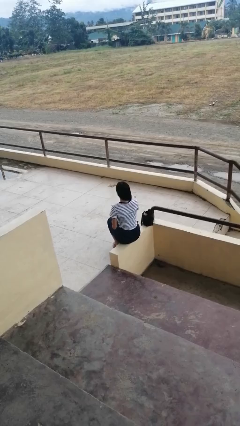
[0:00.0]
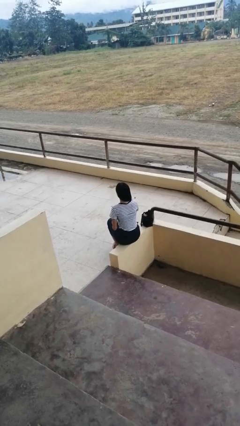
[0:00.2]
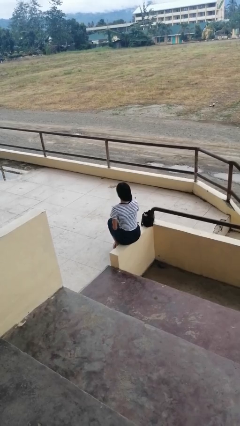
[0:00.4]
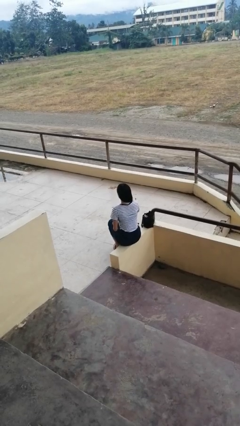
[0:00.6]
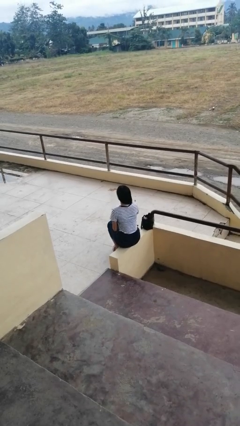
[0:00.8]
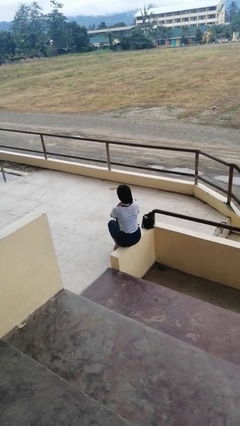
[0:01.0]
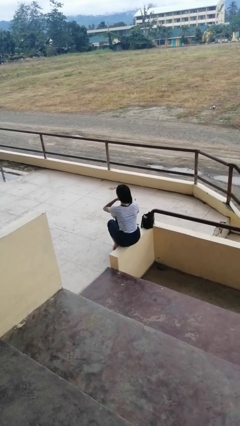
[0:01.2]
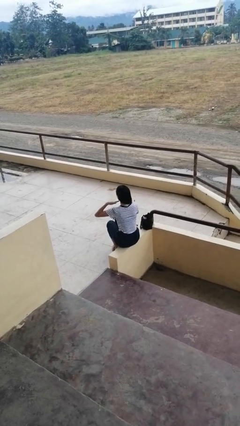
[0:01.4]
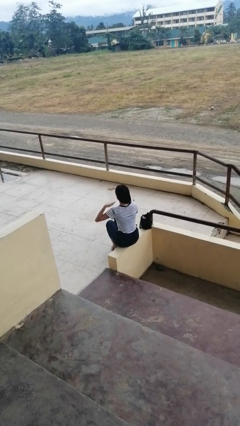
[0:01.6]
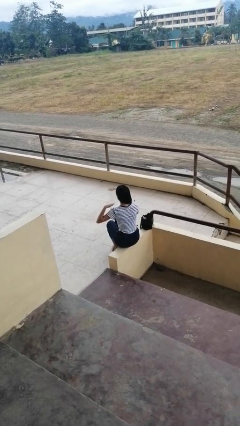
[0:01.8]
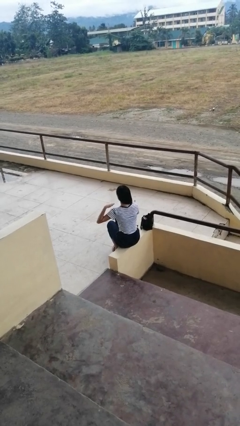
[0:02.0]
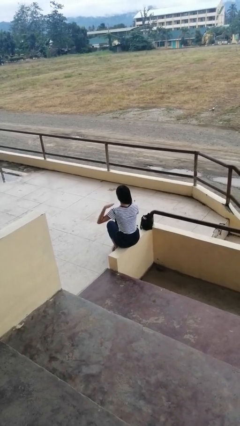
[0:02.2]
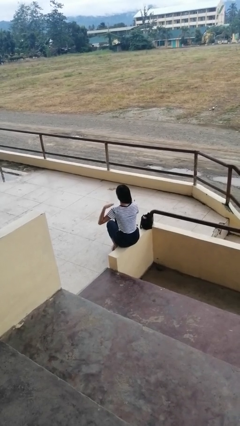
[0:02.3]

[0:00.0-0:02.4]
person gestures cut

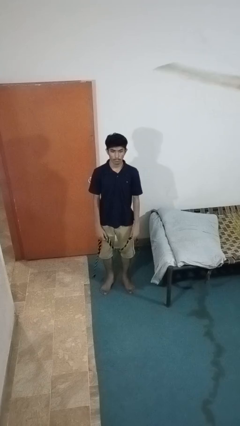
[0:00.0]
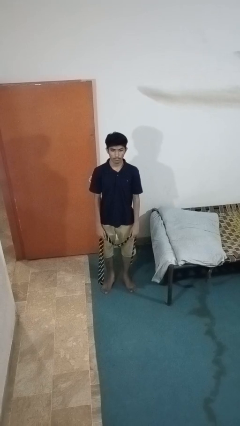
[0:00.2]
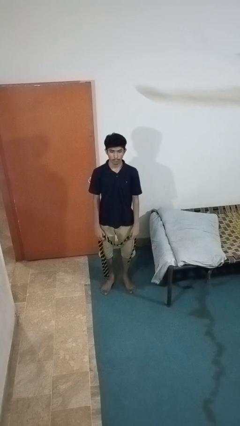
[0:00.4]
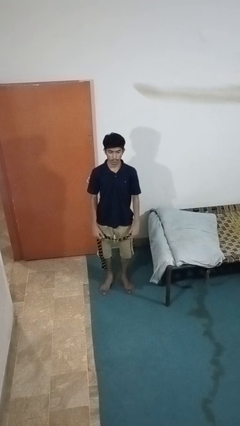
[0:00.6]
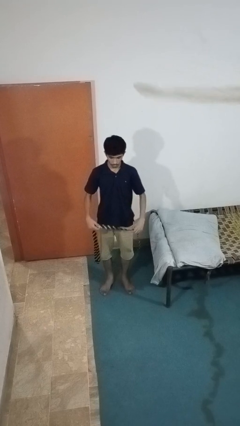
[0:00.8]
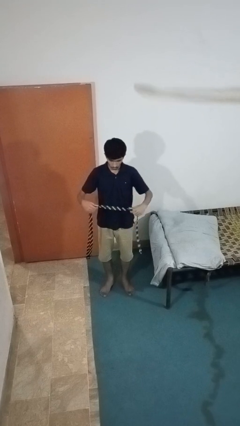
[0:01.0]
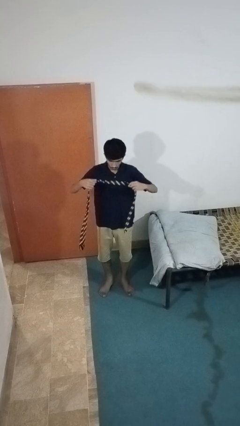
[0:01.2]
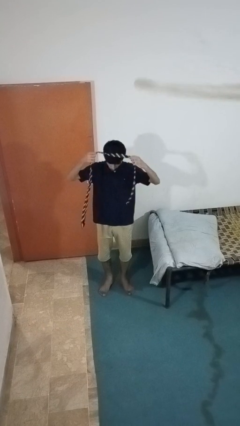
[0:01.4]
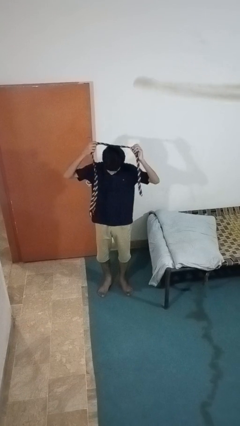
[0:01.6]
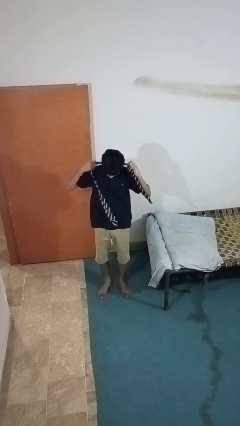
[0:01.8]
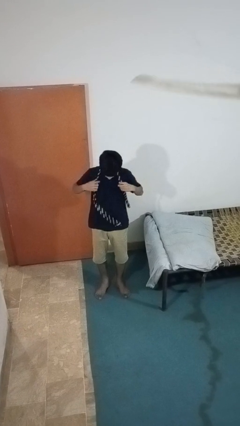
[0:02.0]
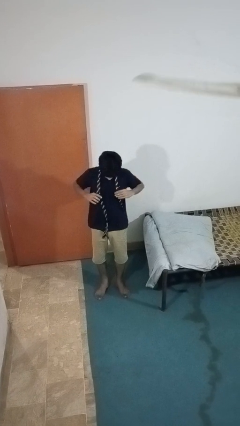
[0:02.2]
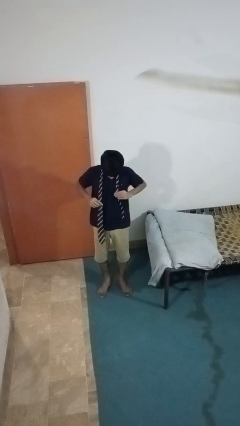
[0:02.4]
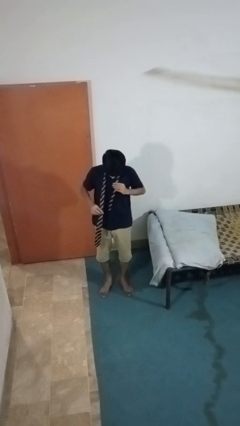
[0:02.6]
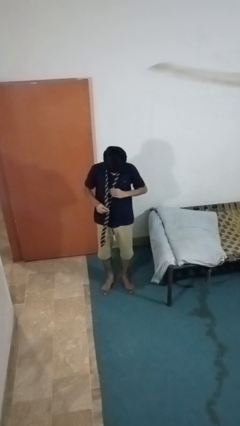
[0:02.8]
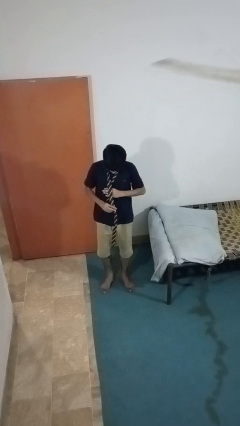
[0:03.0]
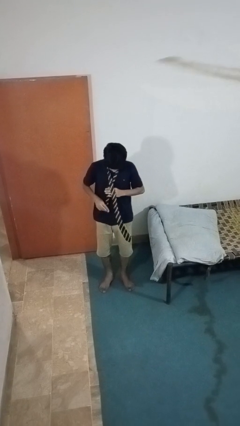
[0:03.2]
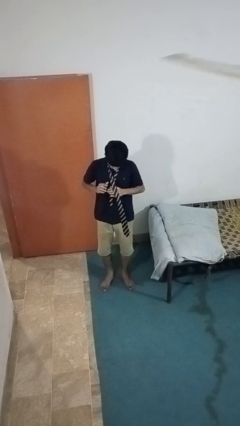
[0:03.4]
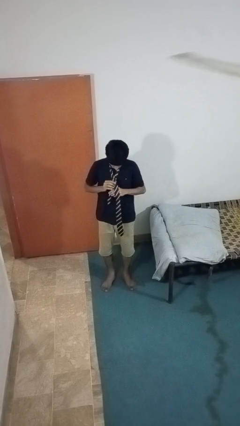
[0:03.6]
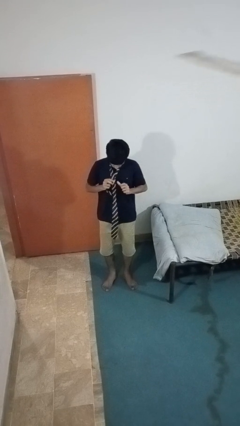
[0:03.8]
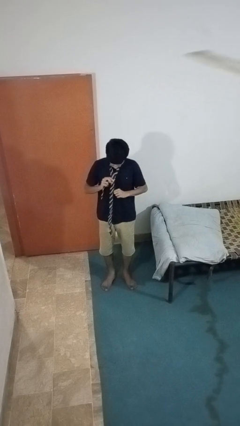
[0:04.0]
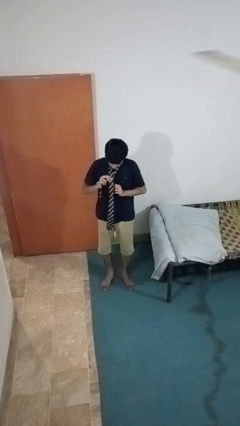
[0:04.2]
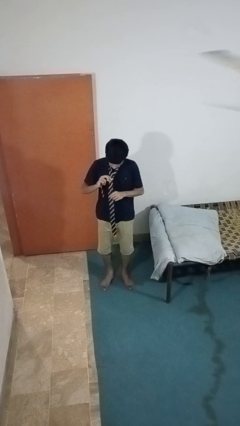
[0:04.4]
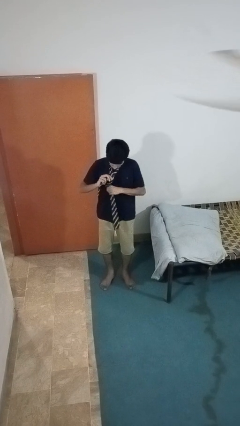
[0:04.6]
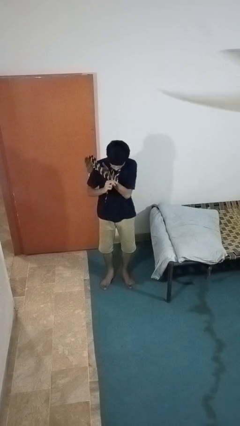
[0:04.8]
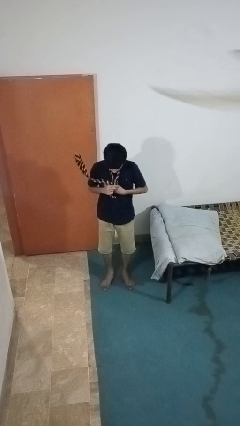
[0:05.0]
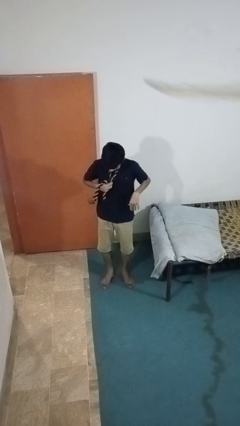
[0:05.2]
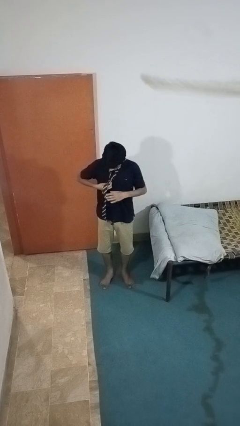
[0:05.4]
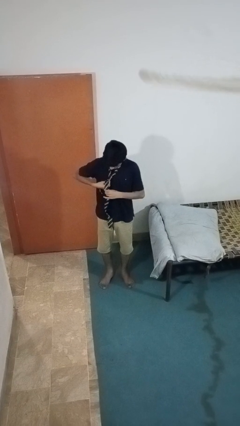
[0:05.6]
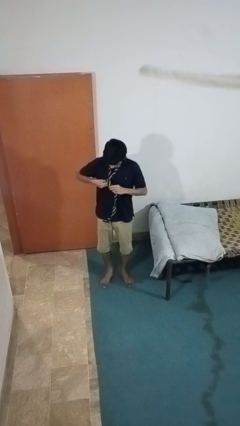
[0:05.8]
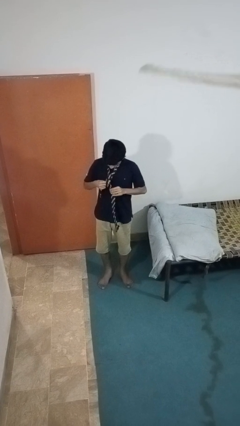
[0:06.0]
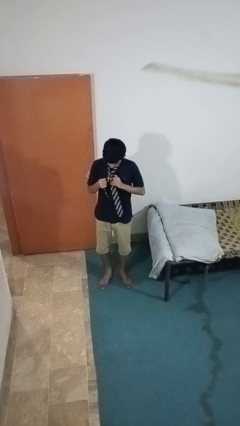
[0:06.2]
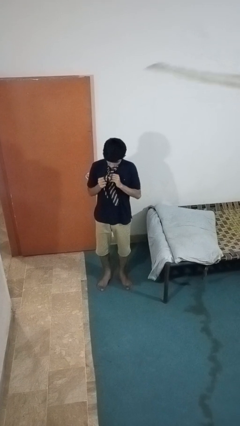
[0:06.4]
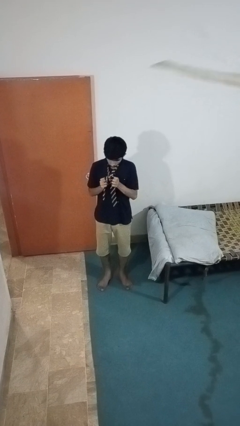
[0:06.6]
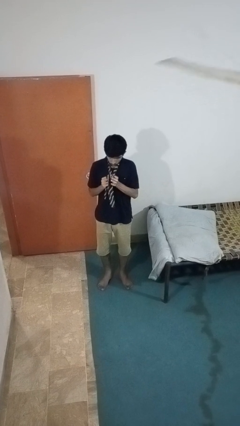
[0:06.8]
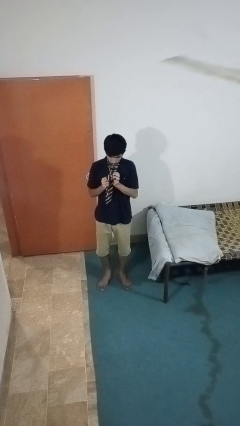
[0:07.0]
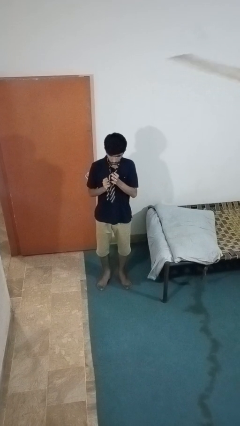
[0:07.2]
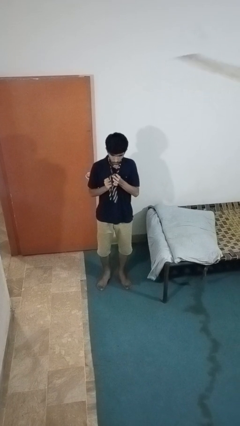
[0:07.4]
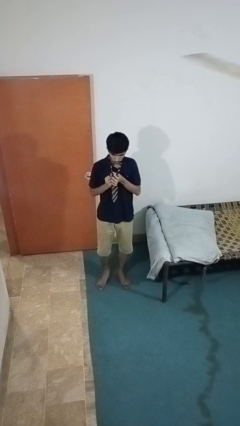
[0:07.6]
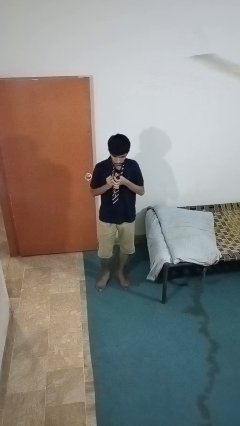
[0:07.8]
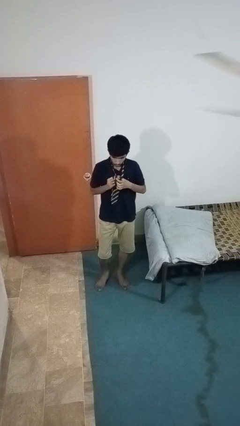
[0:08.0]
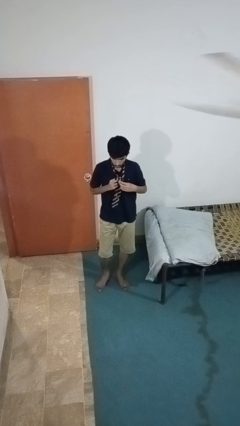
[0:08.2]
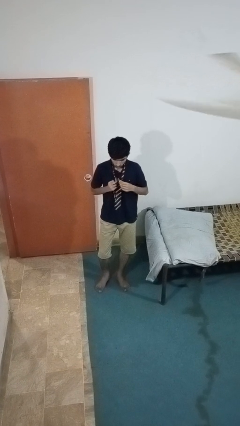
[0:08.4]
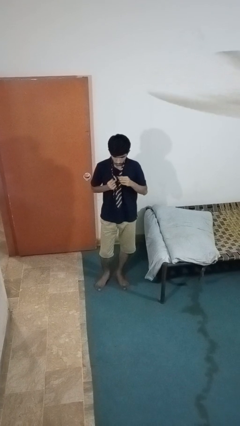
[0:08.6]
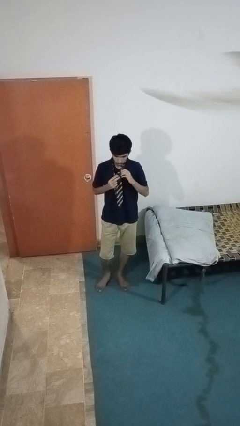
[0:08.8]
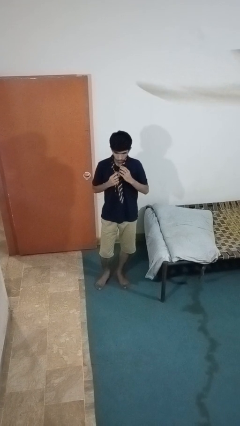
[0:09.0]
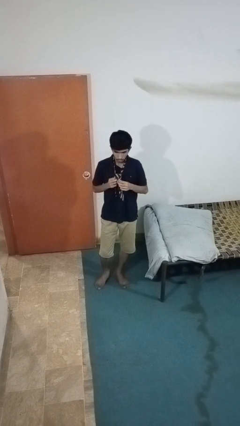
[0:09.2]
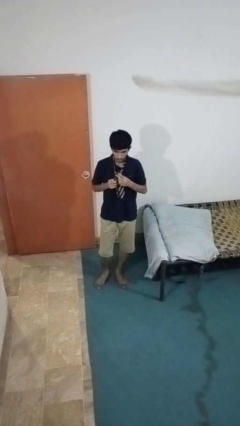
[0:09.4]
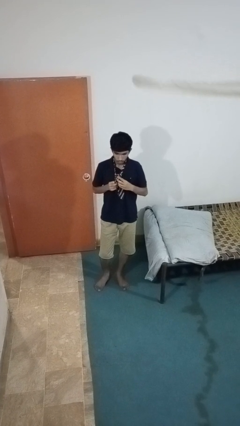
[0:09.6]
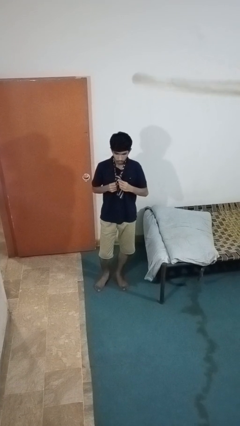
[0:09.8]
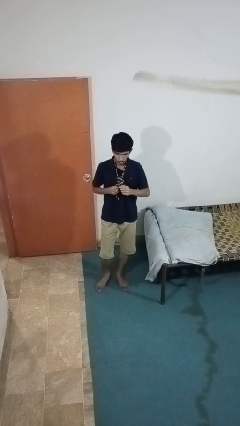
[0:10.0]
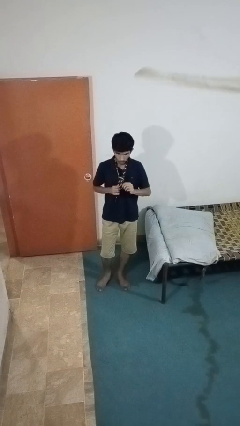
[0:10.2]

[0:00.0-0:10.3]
person puts on necktie

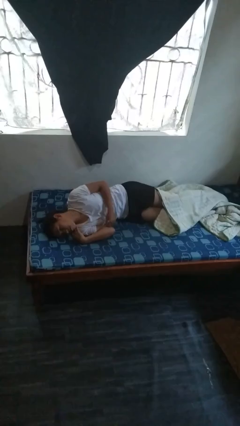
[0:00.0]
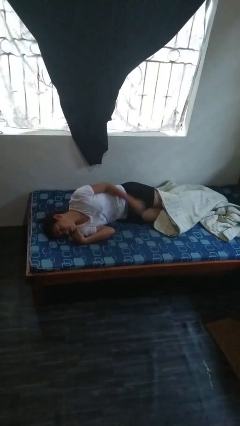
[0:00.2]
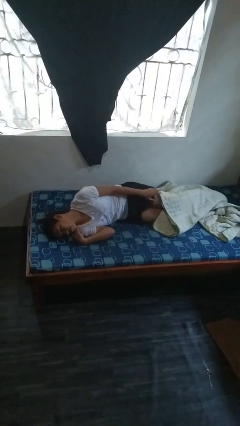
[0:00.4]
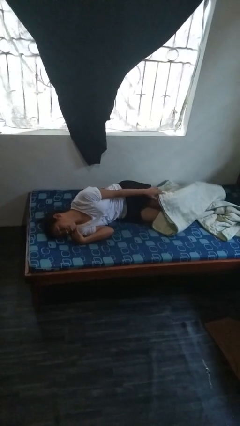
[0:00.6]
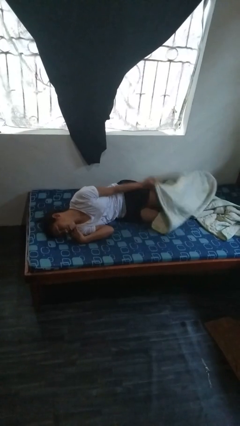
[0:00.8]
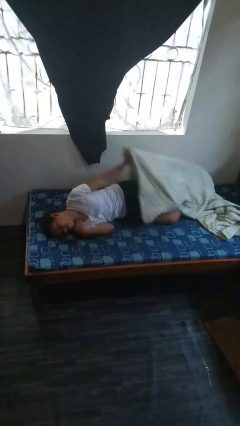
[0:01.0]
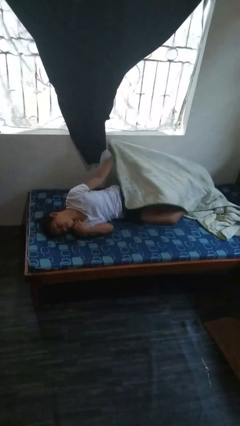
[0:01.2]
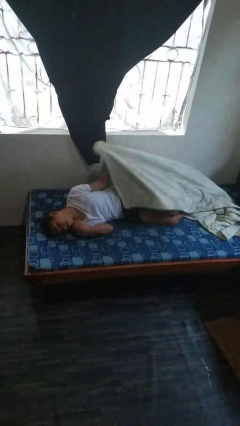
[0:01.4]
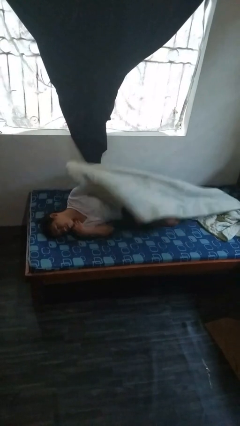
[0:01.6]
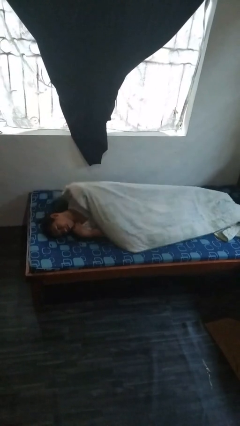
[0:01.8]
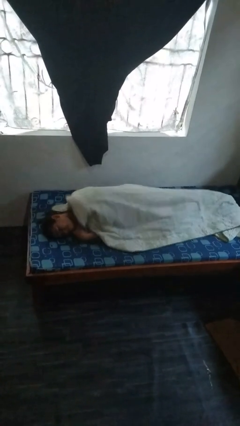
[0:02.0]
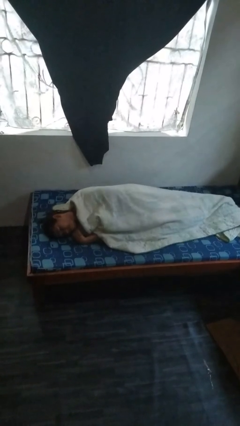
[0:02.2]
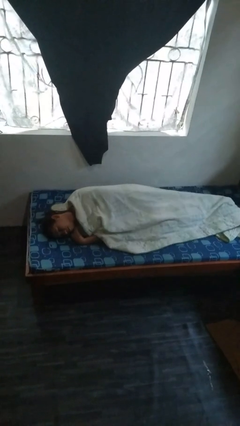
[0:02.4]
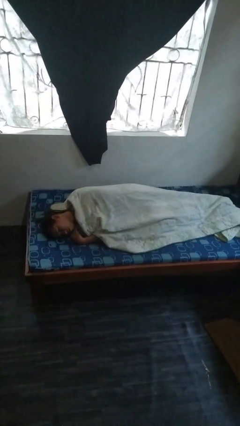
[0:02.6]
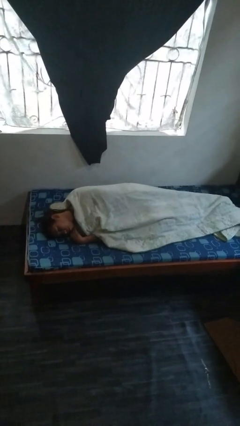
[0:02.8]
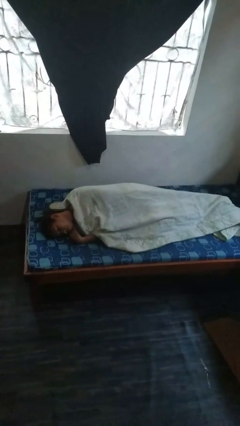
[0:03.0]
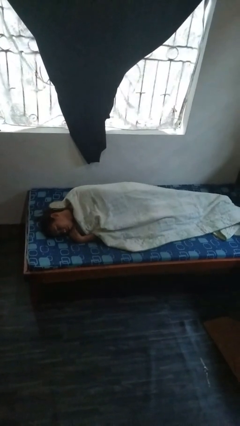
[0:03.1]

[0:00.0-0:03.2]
person covers with bedsheets

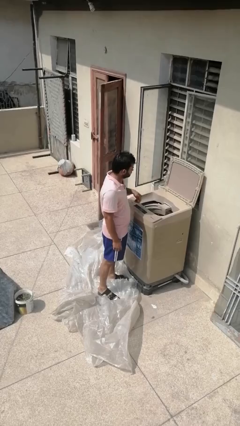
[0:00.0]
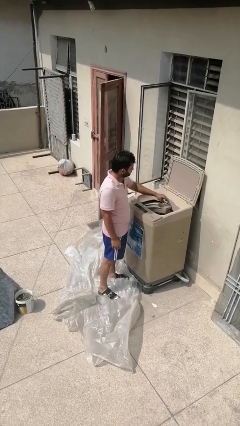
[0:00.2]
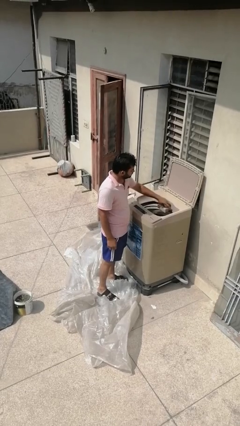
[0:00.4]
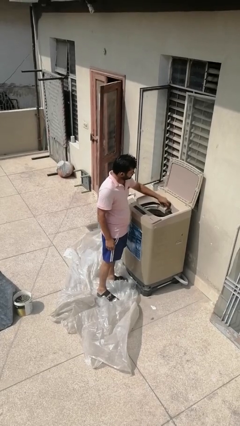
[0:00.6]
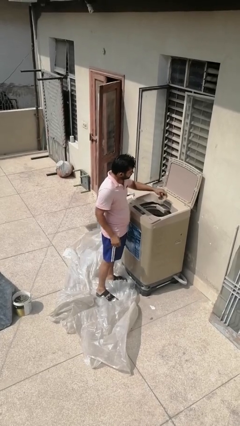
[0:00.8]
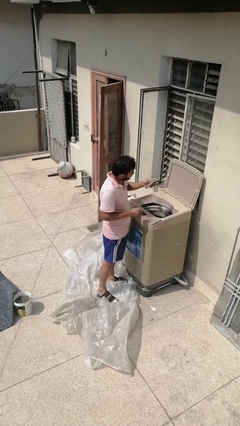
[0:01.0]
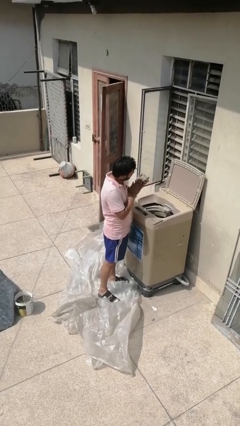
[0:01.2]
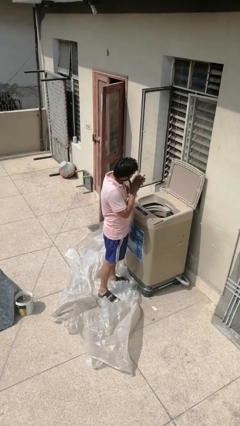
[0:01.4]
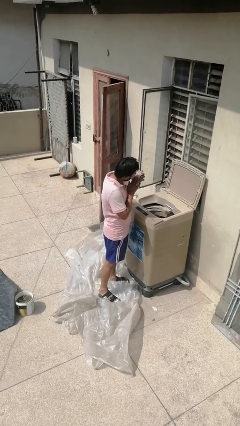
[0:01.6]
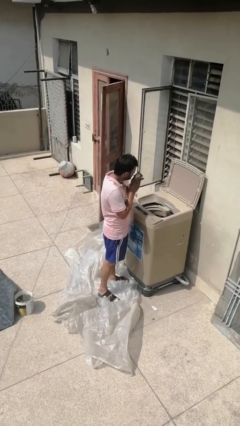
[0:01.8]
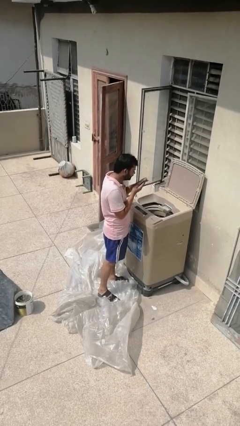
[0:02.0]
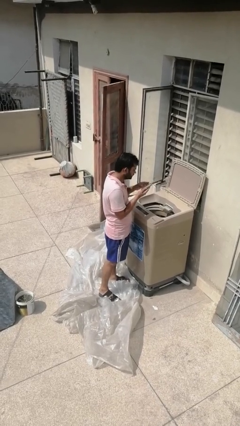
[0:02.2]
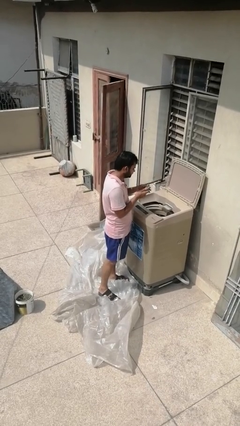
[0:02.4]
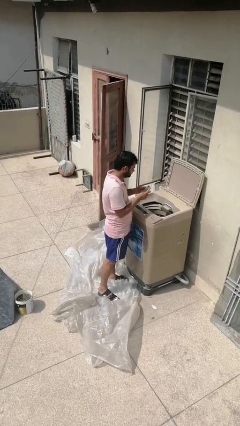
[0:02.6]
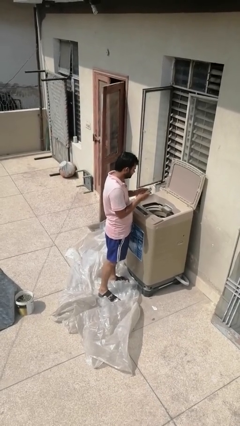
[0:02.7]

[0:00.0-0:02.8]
person cleans dryer lint trap
